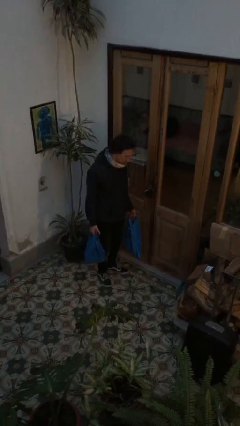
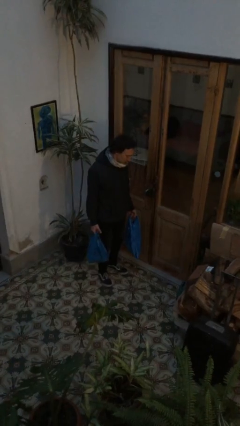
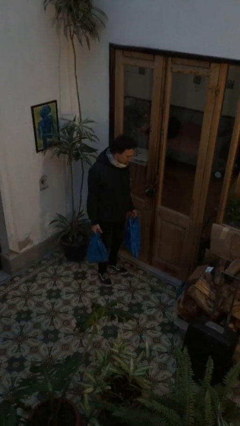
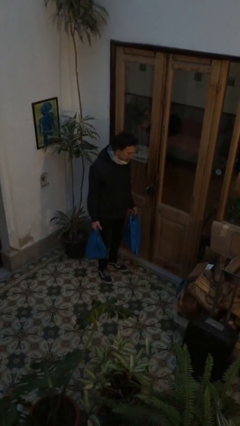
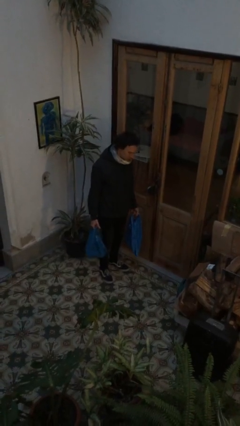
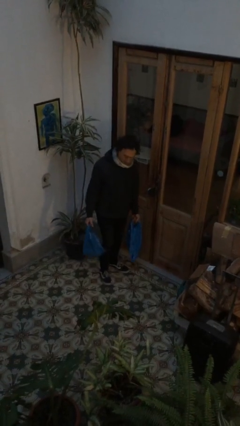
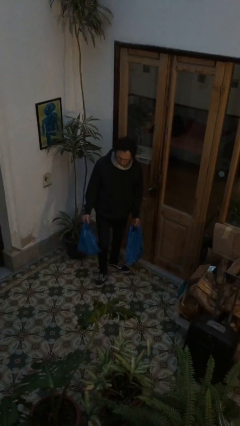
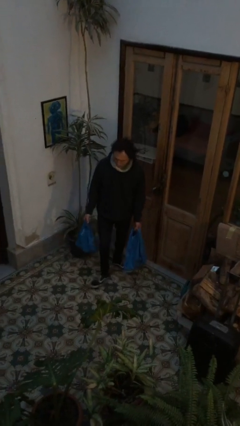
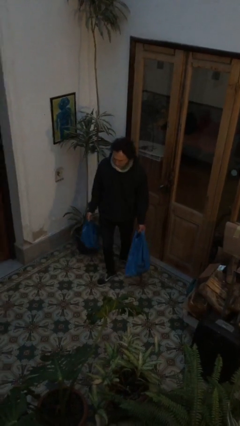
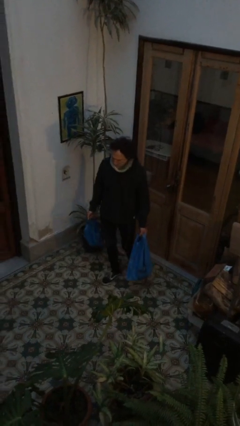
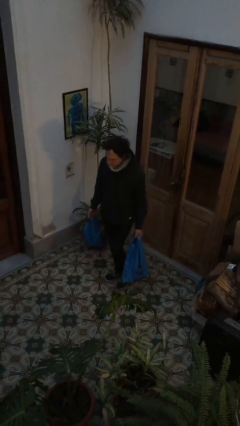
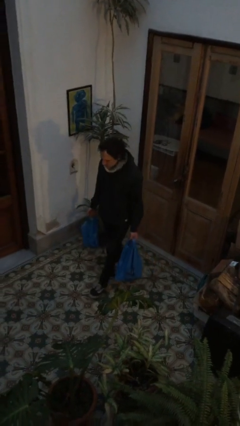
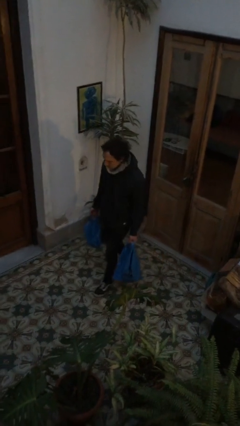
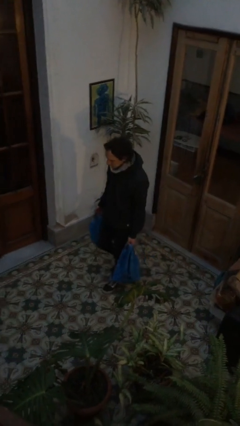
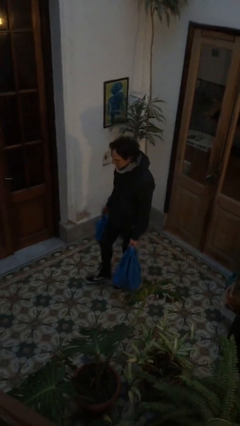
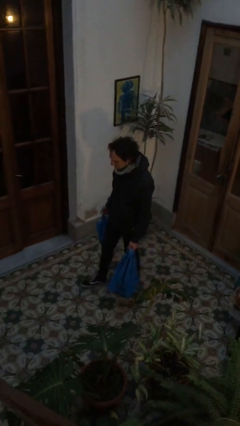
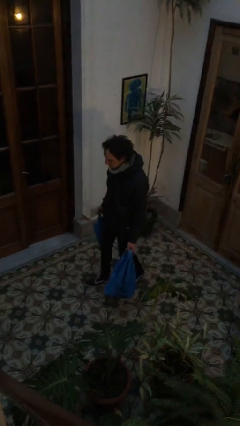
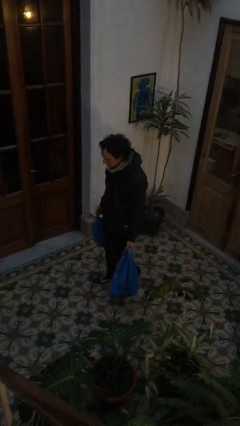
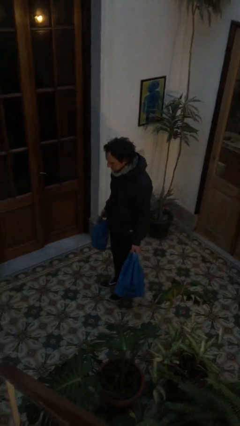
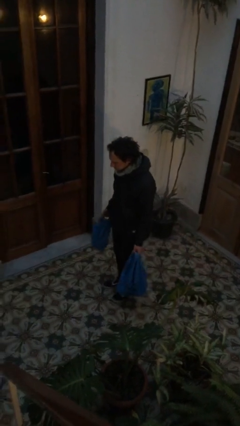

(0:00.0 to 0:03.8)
person carries groceries

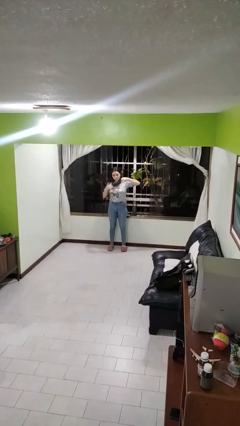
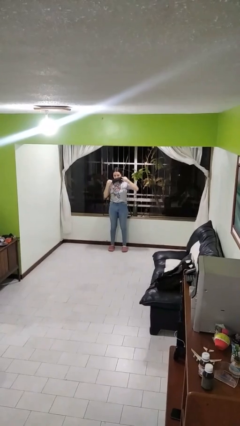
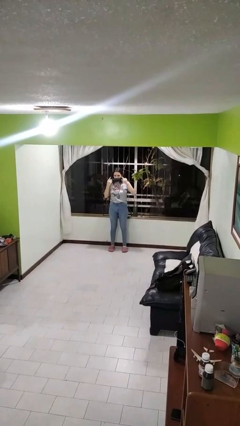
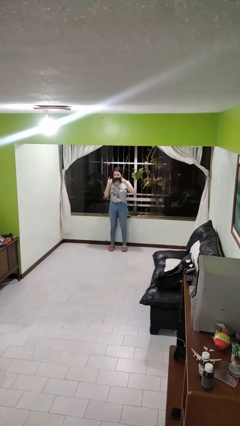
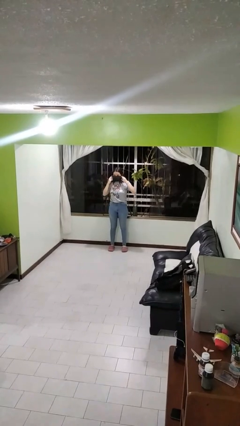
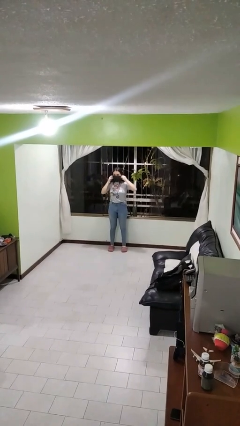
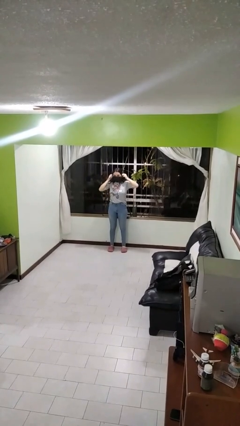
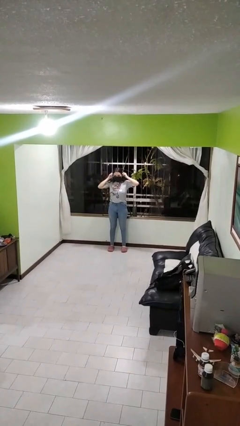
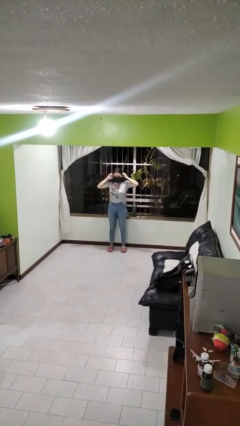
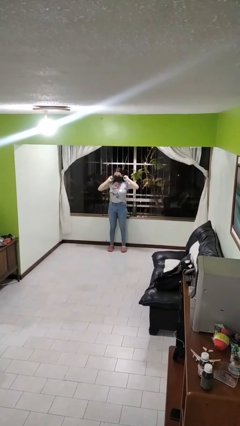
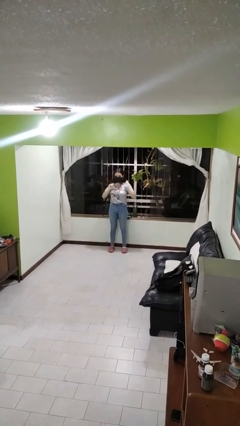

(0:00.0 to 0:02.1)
person puts on facemask

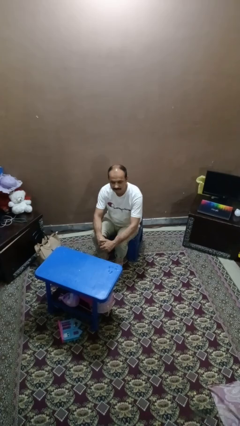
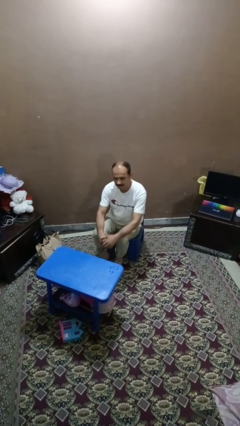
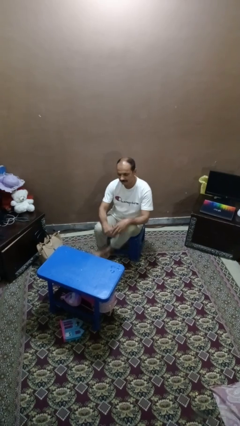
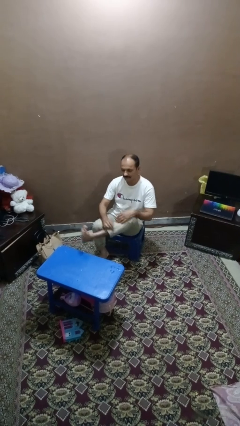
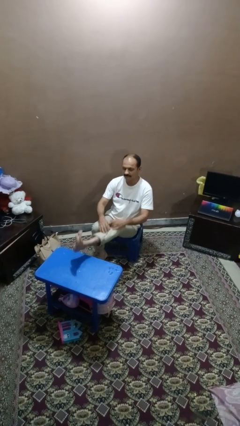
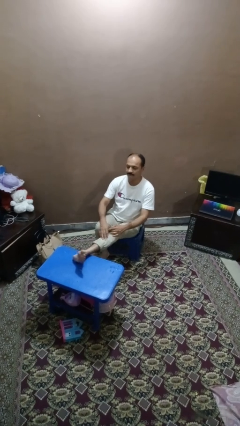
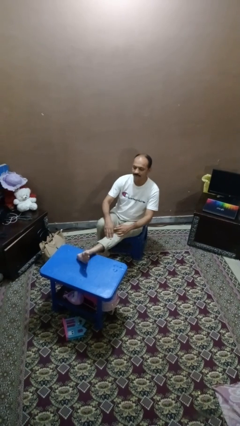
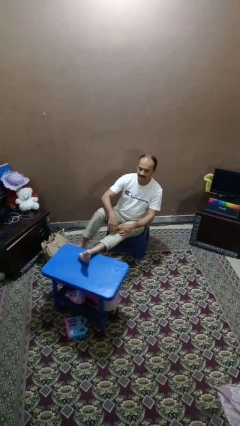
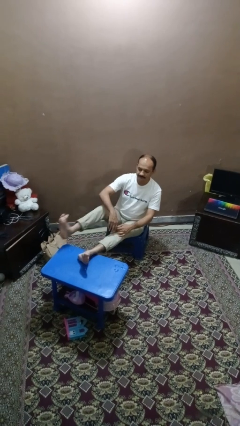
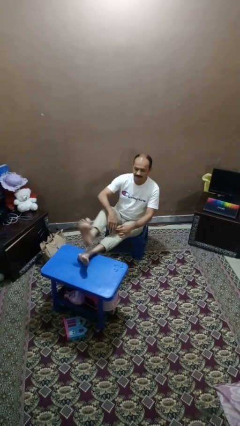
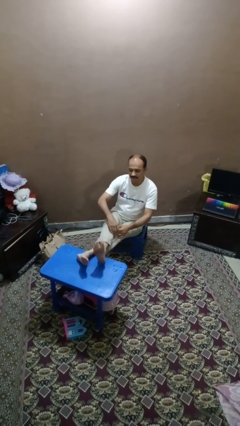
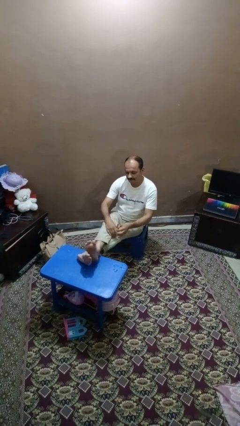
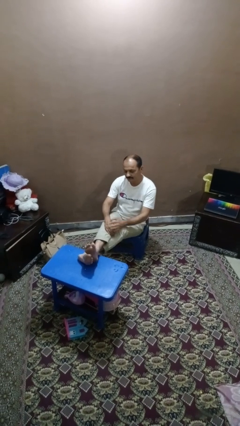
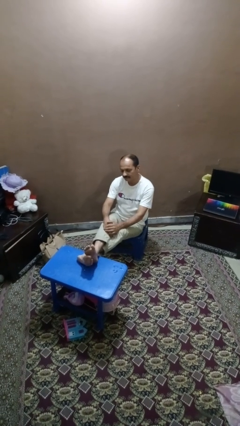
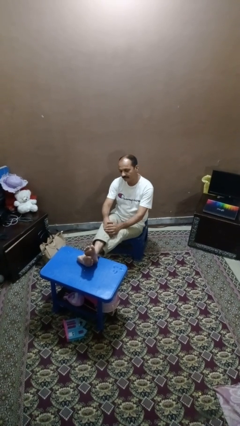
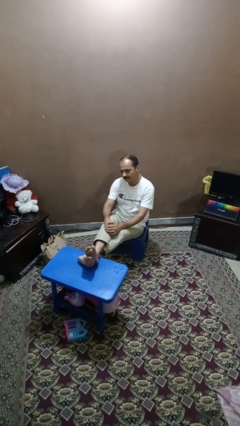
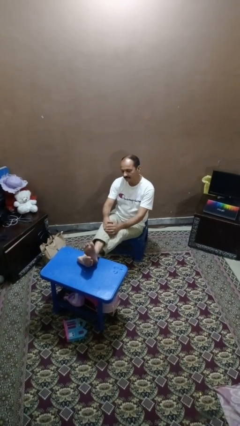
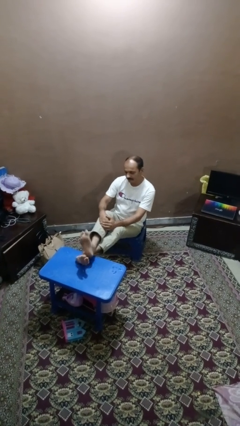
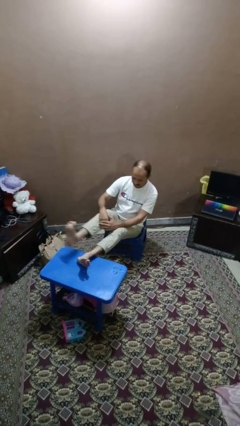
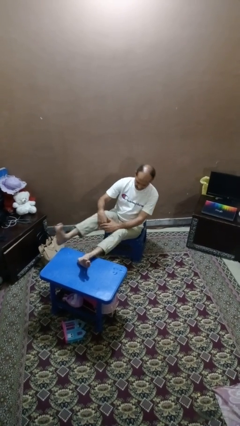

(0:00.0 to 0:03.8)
person puts feet up

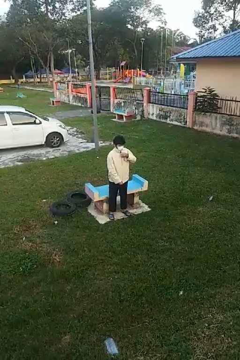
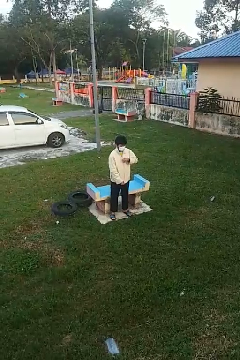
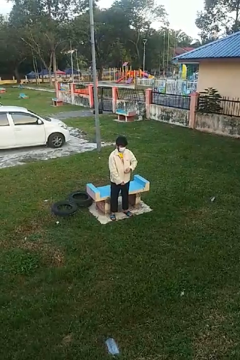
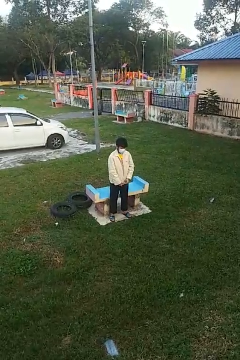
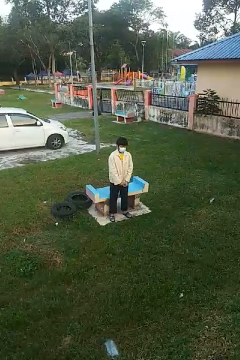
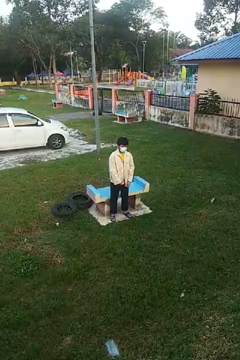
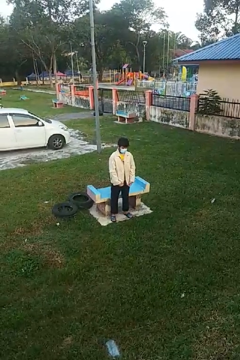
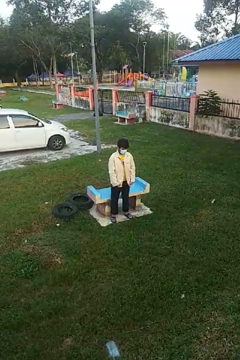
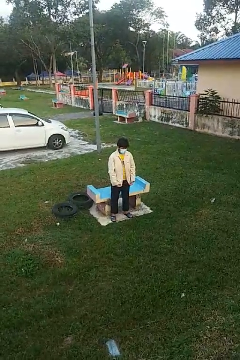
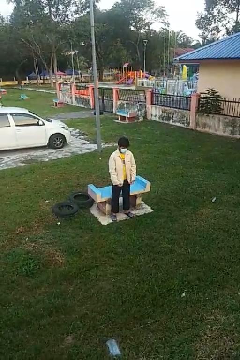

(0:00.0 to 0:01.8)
person unzips jacket

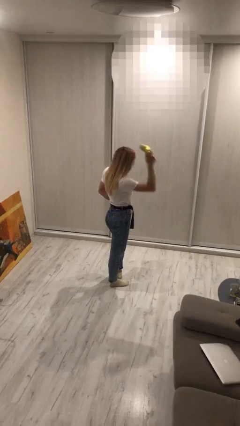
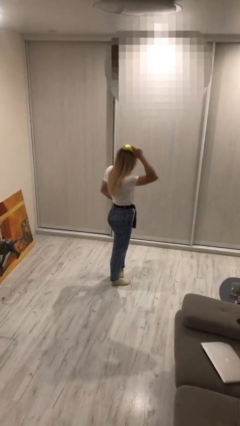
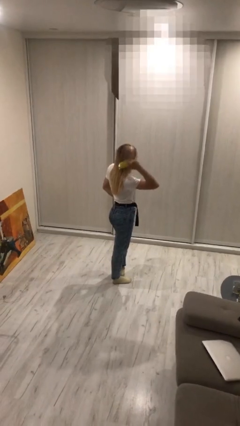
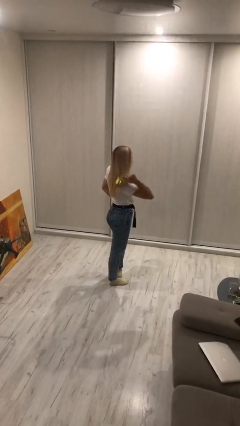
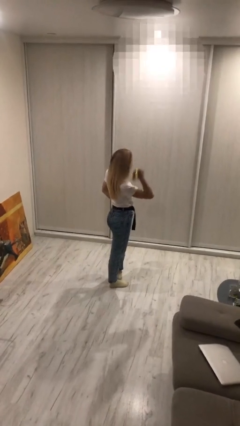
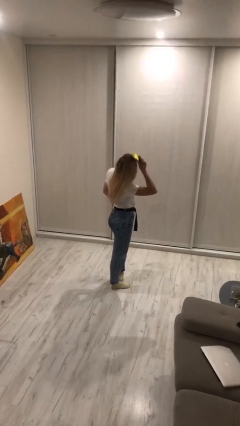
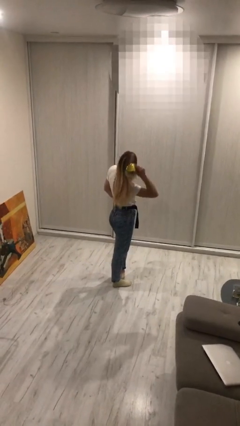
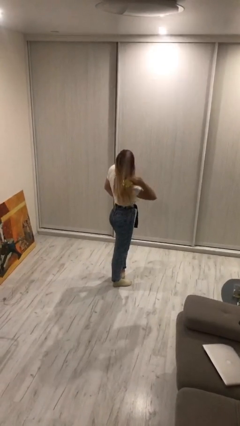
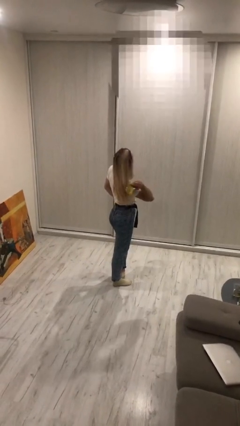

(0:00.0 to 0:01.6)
person brushes hair

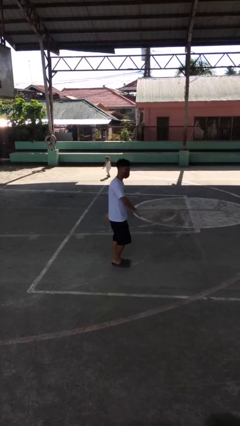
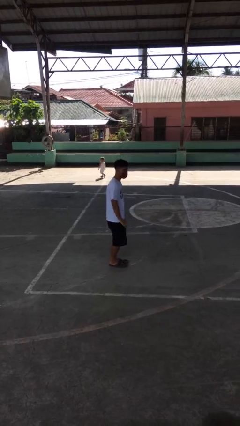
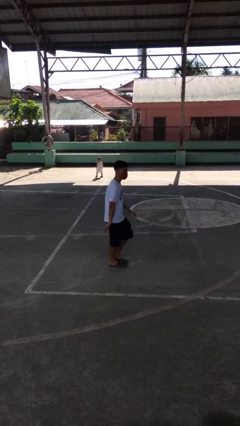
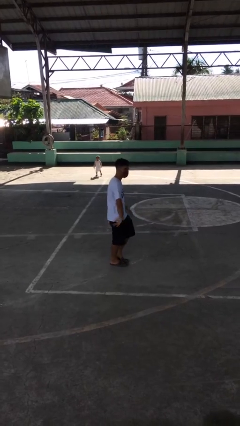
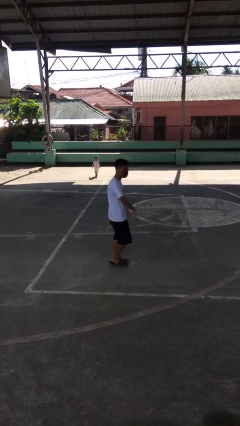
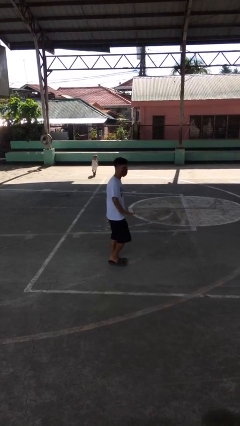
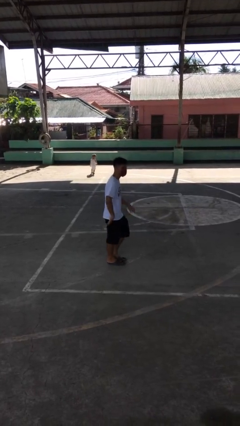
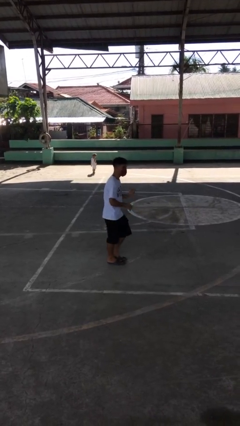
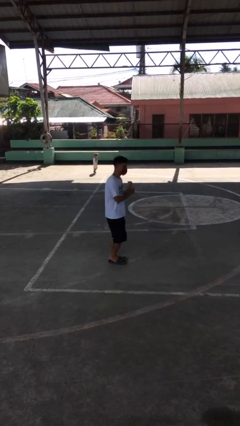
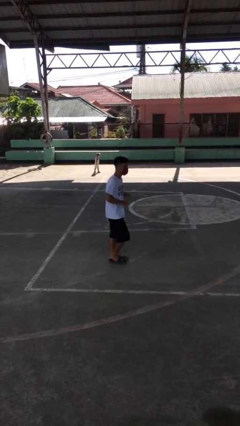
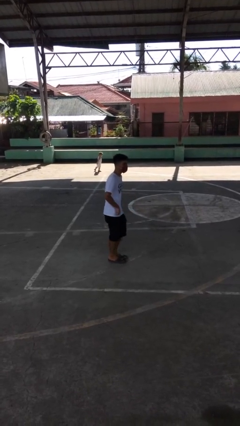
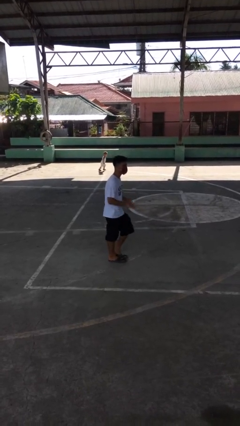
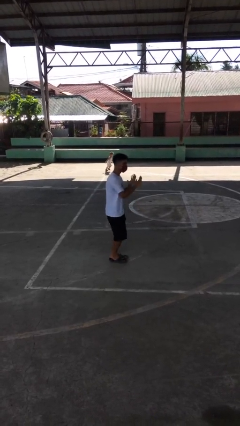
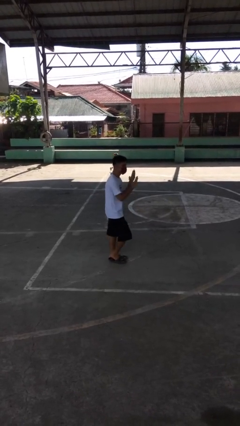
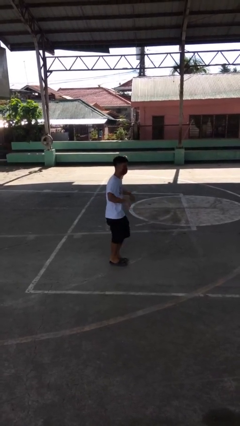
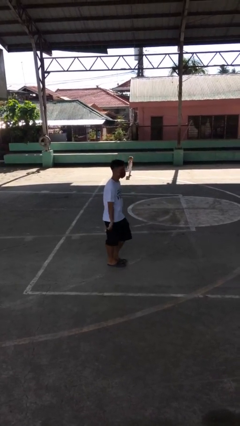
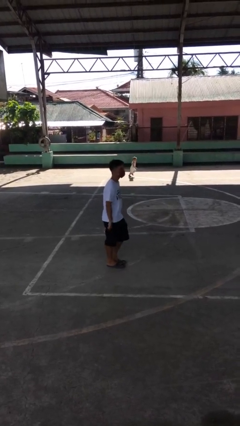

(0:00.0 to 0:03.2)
person dances in place

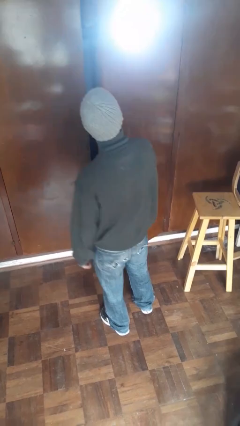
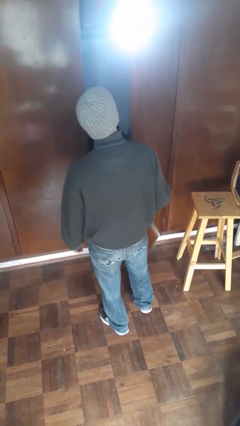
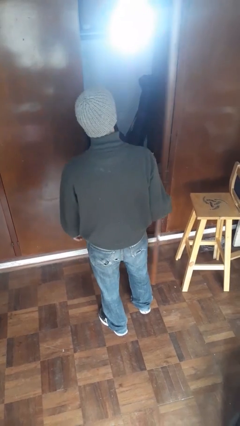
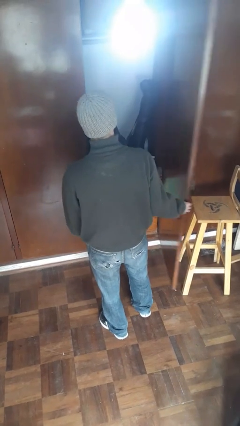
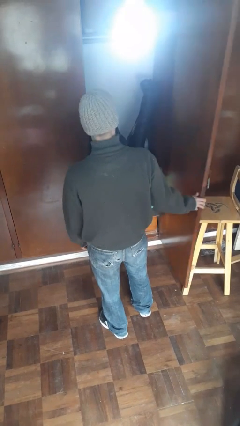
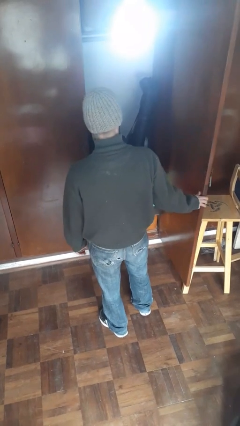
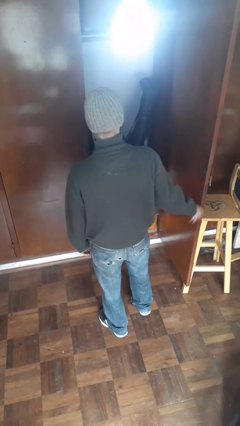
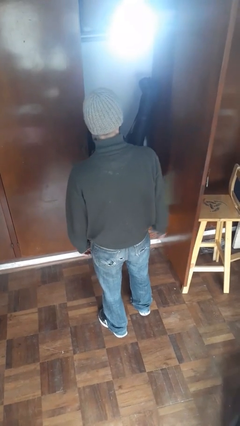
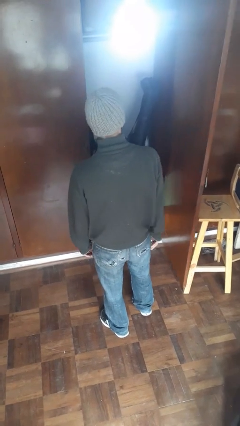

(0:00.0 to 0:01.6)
person opens closet door
